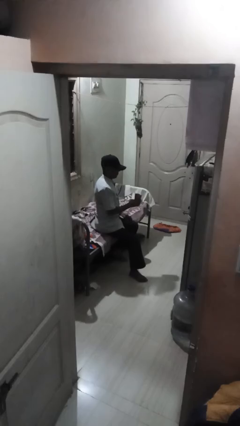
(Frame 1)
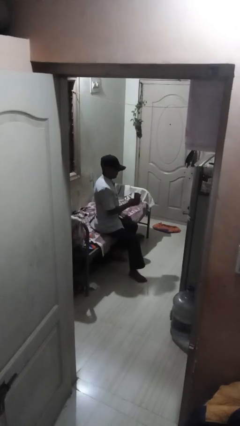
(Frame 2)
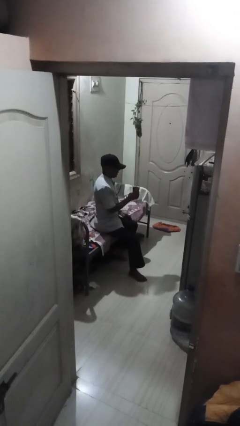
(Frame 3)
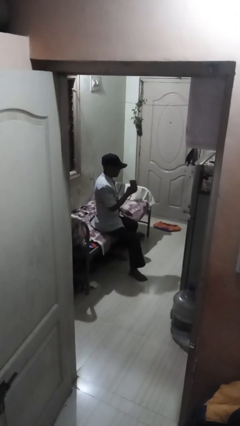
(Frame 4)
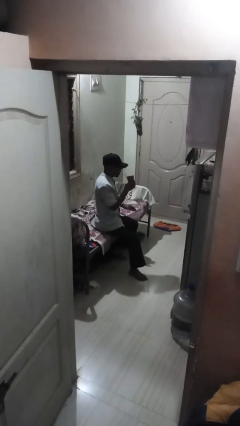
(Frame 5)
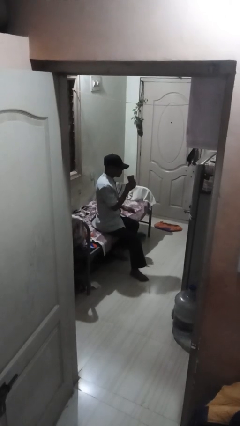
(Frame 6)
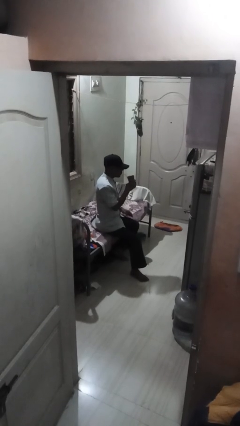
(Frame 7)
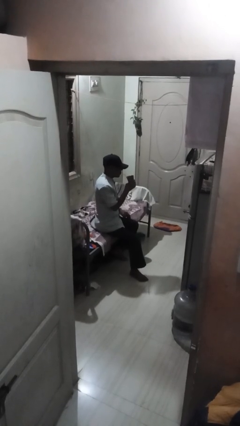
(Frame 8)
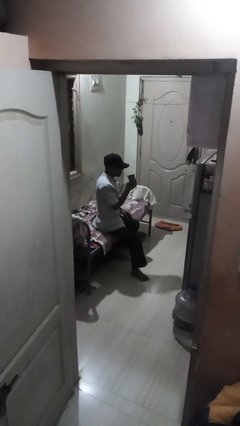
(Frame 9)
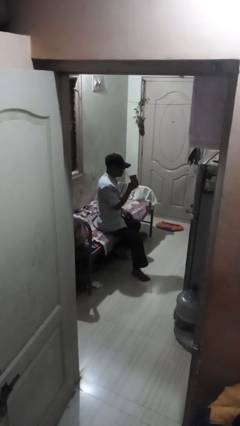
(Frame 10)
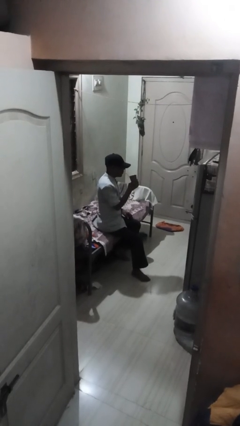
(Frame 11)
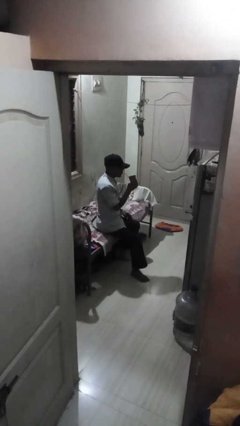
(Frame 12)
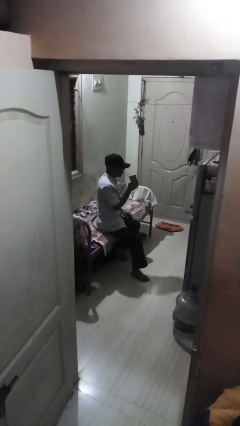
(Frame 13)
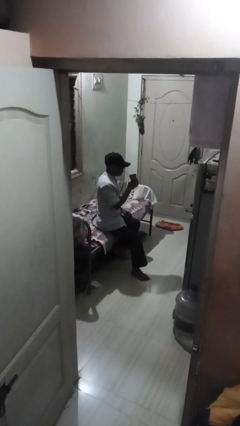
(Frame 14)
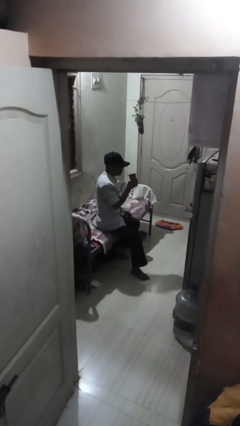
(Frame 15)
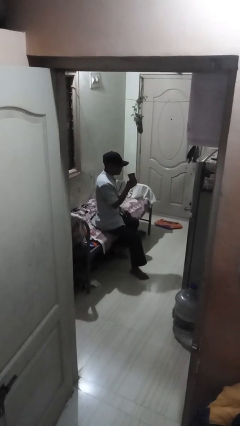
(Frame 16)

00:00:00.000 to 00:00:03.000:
person drinks from straw

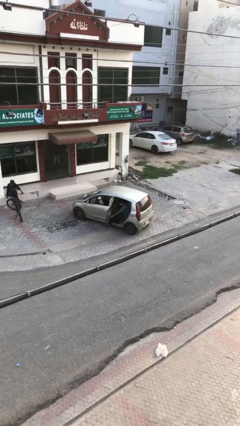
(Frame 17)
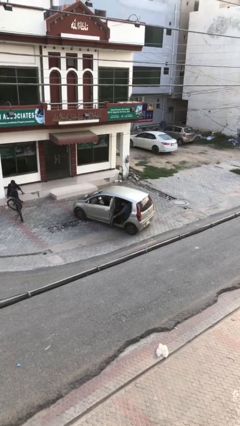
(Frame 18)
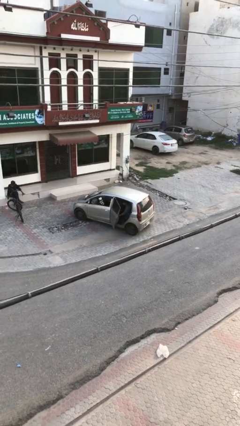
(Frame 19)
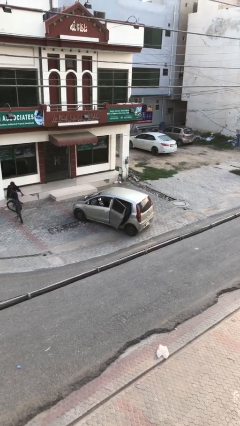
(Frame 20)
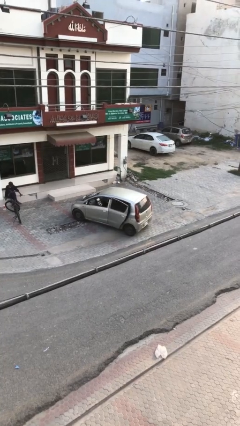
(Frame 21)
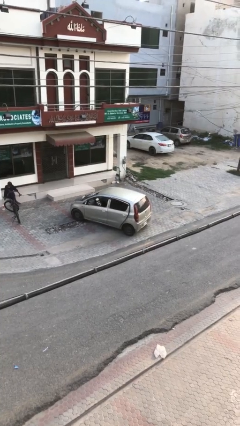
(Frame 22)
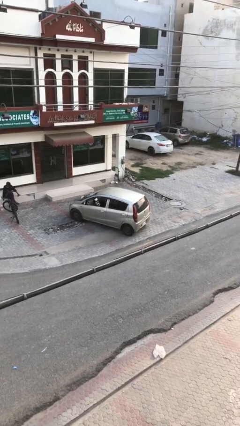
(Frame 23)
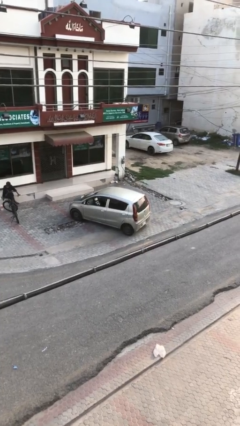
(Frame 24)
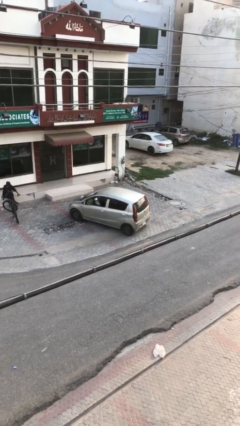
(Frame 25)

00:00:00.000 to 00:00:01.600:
person closes car door

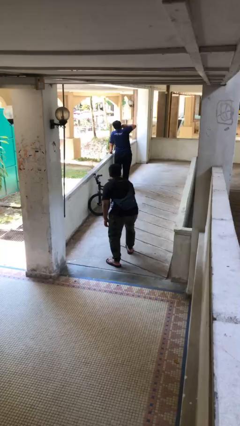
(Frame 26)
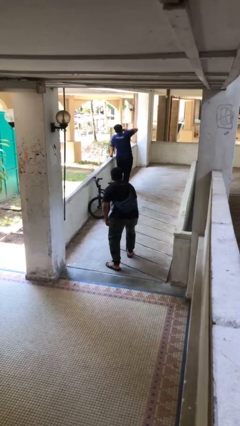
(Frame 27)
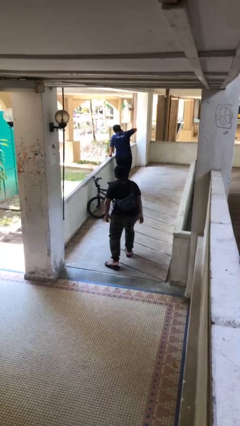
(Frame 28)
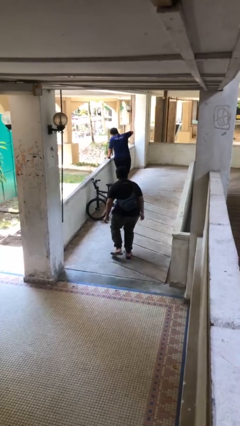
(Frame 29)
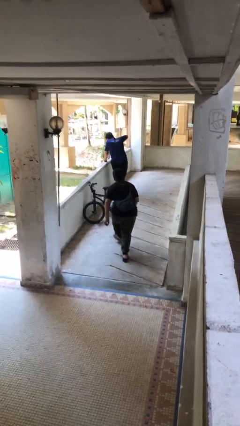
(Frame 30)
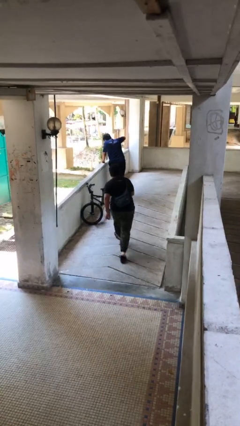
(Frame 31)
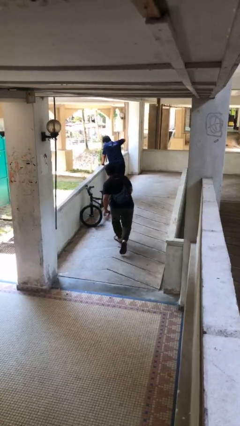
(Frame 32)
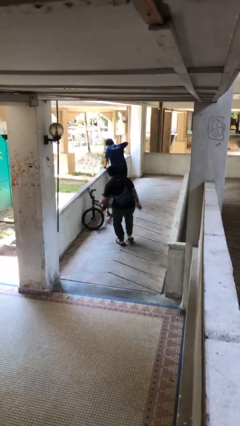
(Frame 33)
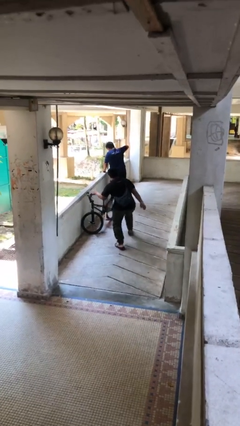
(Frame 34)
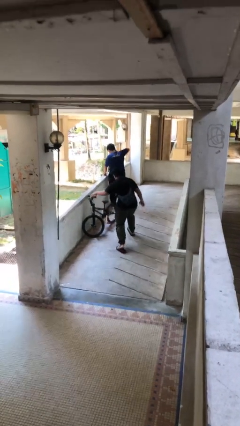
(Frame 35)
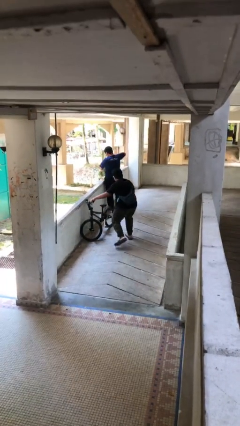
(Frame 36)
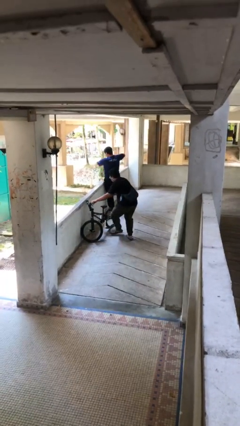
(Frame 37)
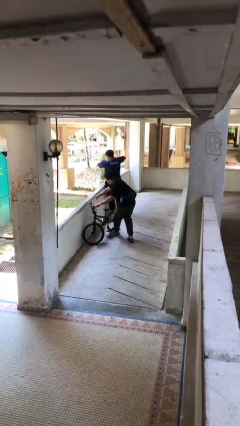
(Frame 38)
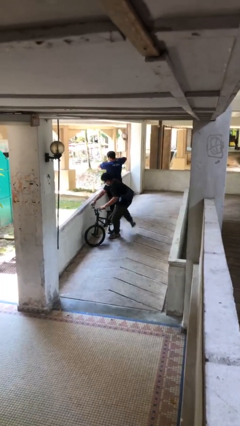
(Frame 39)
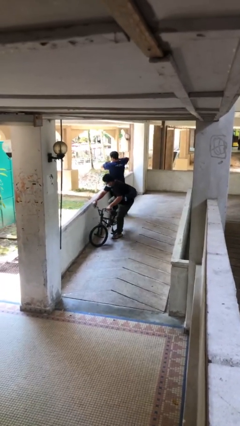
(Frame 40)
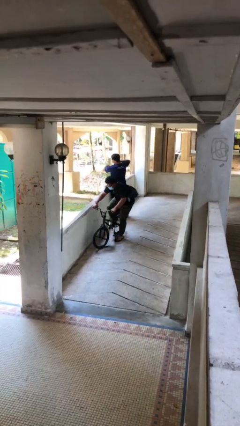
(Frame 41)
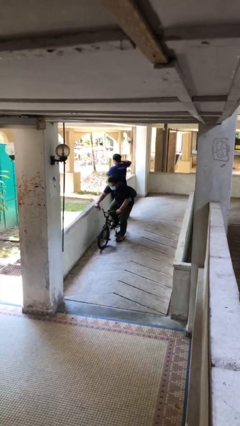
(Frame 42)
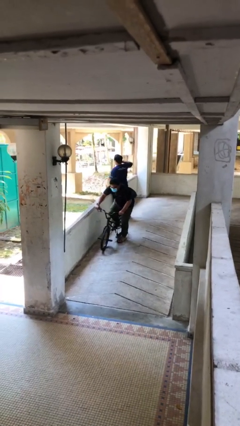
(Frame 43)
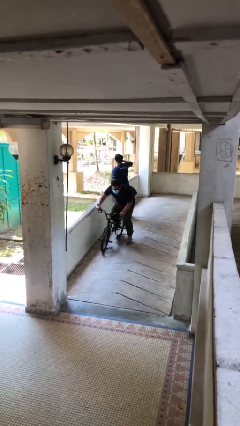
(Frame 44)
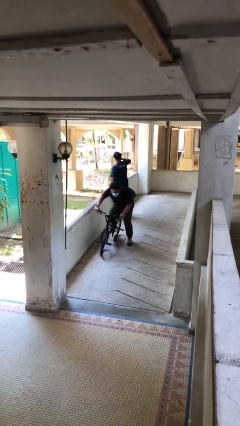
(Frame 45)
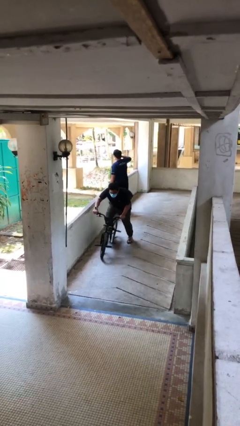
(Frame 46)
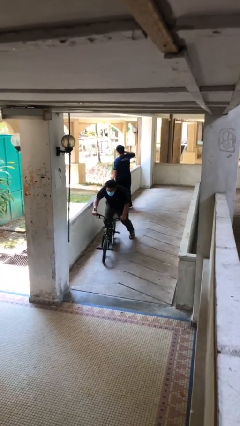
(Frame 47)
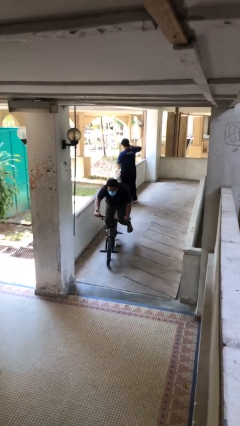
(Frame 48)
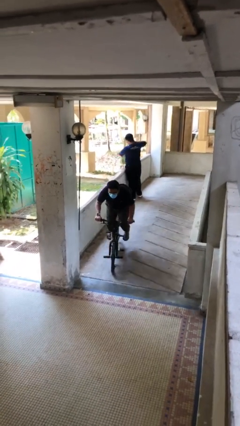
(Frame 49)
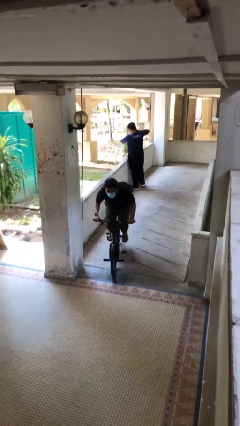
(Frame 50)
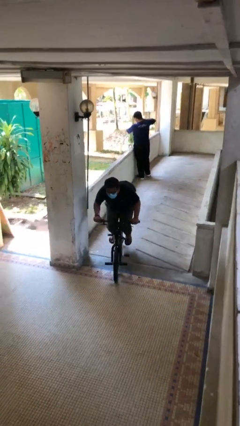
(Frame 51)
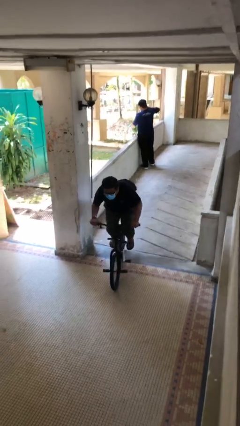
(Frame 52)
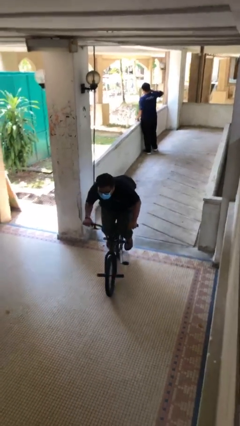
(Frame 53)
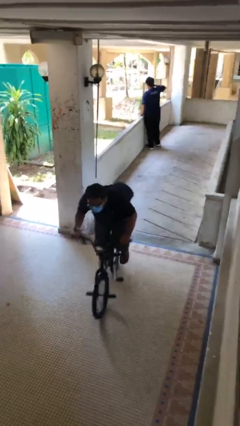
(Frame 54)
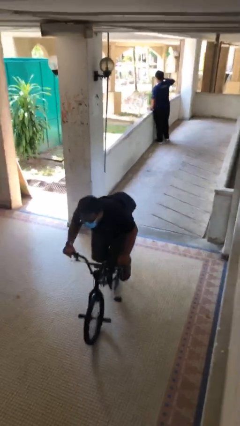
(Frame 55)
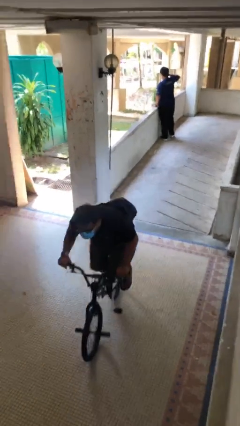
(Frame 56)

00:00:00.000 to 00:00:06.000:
person steals object from person

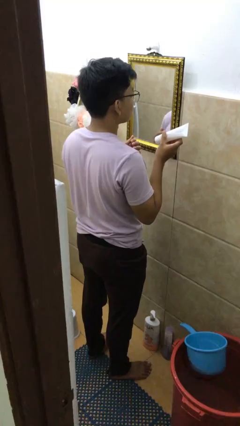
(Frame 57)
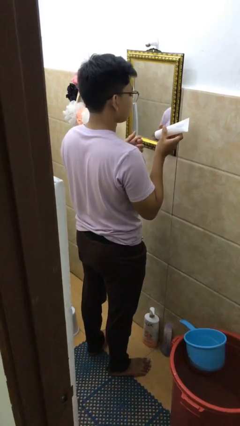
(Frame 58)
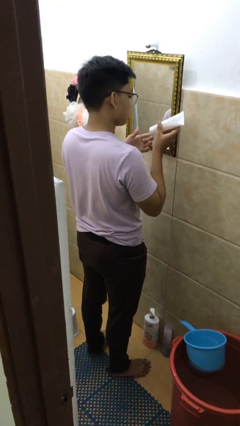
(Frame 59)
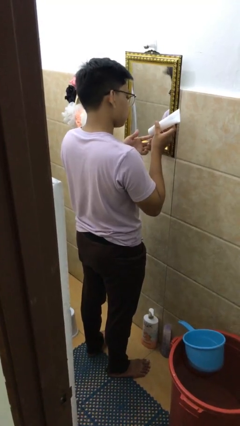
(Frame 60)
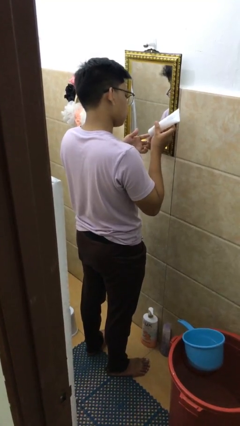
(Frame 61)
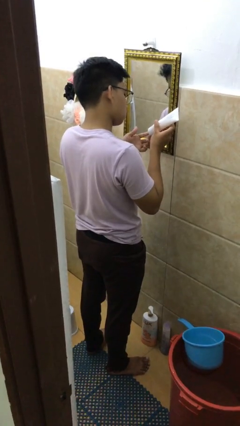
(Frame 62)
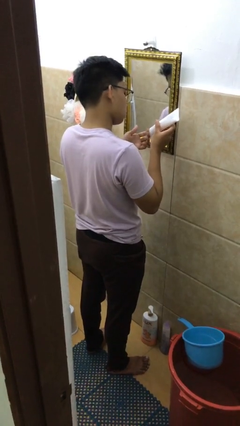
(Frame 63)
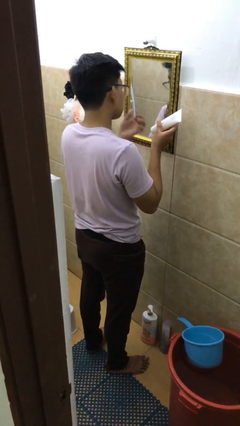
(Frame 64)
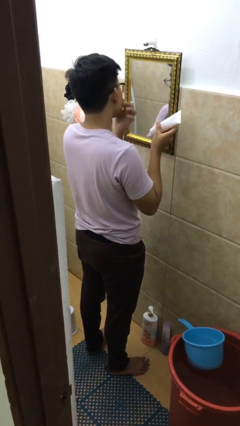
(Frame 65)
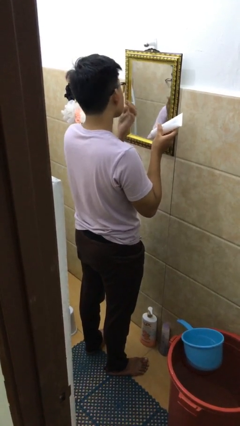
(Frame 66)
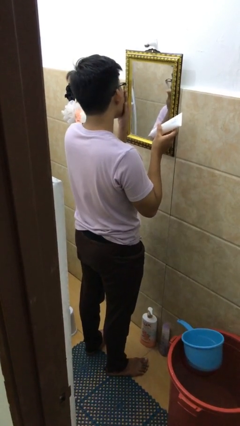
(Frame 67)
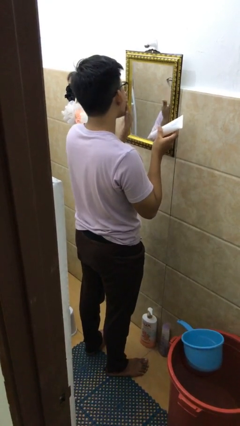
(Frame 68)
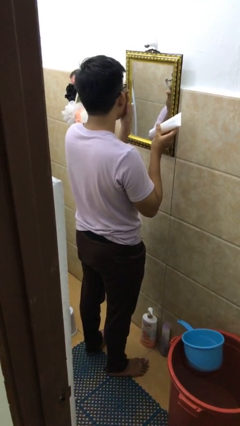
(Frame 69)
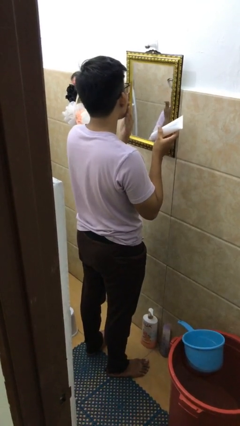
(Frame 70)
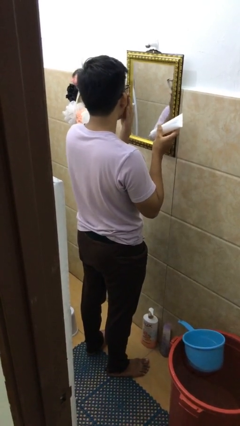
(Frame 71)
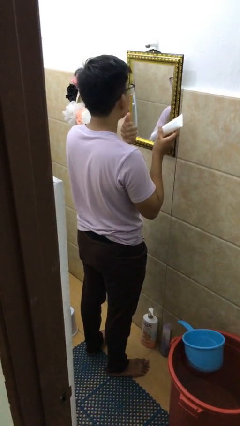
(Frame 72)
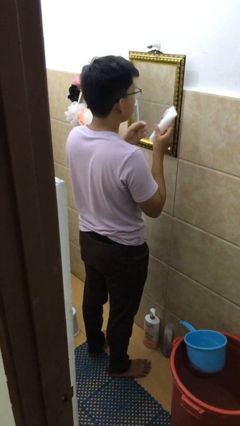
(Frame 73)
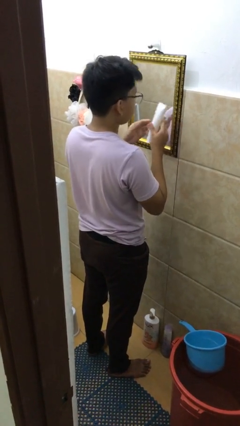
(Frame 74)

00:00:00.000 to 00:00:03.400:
person applies facial moisturizer

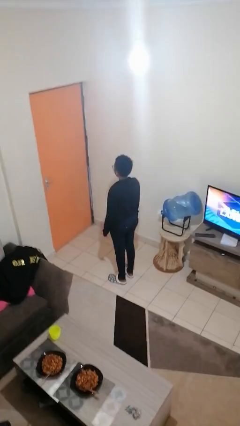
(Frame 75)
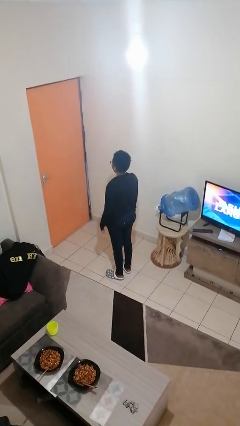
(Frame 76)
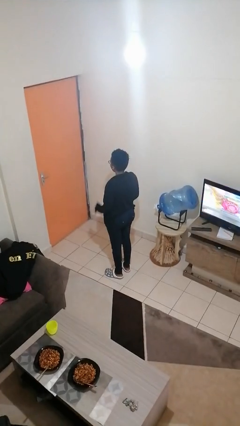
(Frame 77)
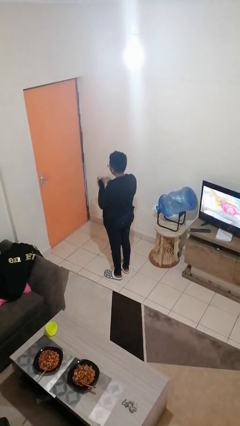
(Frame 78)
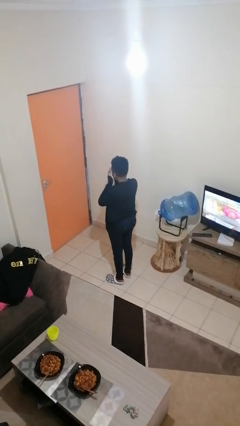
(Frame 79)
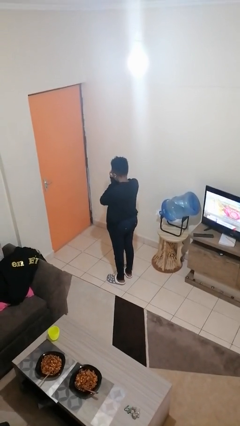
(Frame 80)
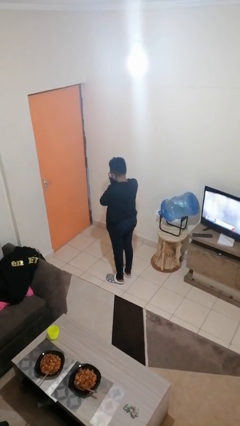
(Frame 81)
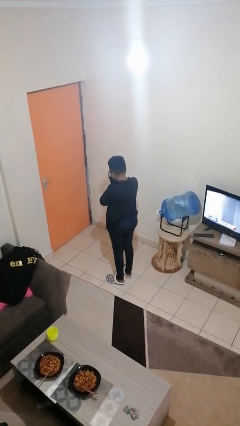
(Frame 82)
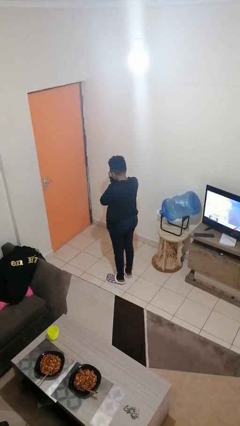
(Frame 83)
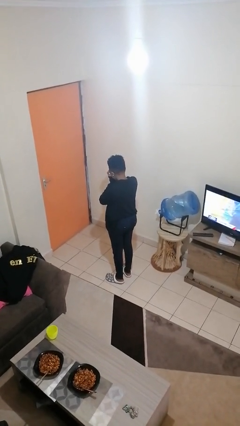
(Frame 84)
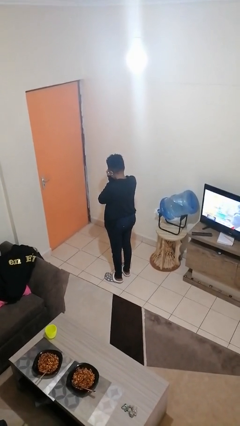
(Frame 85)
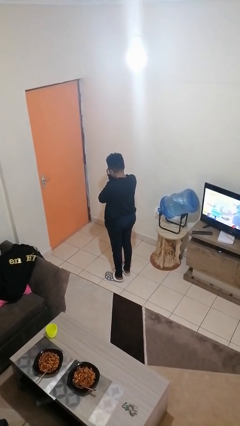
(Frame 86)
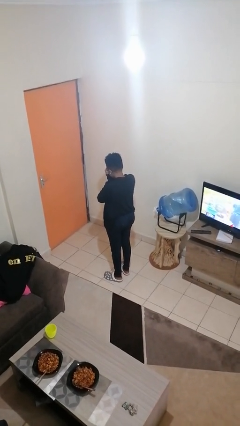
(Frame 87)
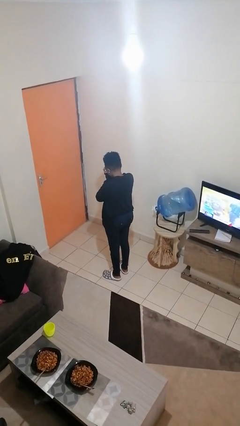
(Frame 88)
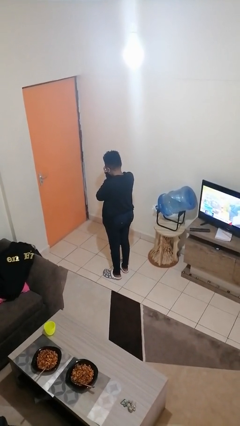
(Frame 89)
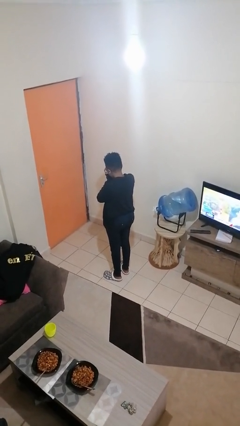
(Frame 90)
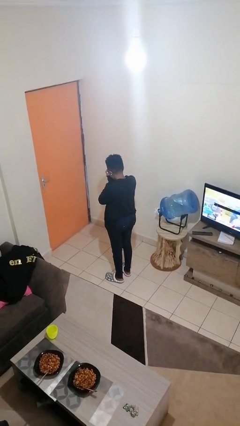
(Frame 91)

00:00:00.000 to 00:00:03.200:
person covers face with hands

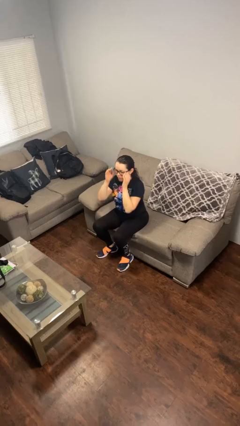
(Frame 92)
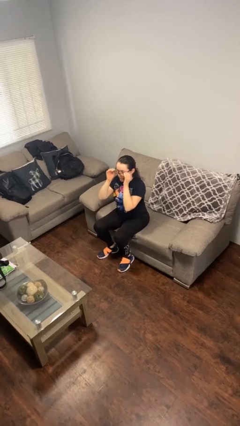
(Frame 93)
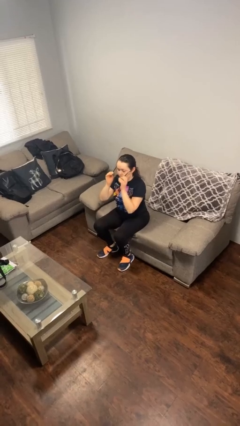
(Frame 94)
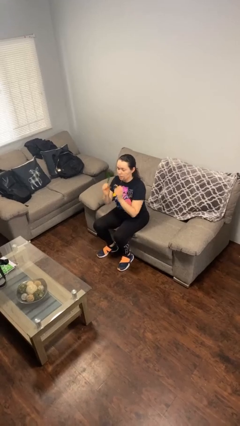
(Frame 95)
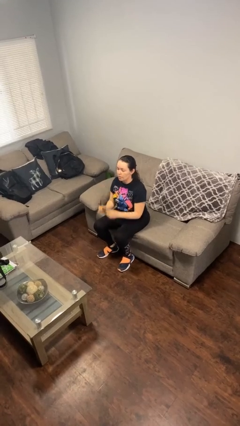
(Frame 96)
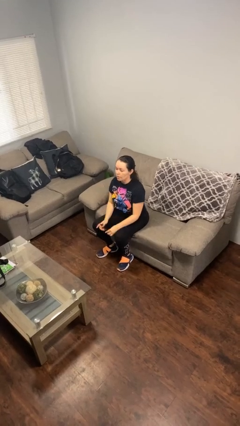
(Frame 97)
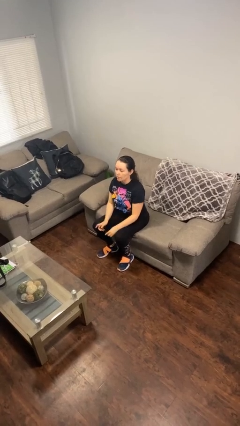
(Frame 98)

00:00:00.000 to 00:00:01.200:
person takes off glasses
